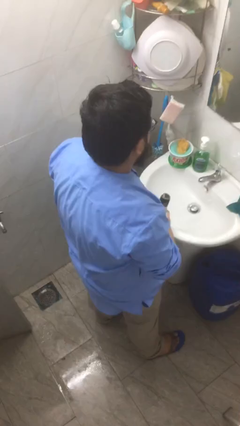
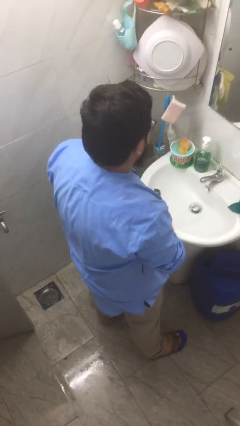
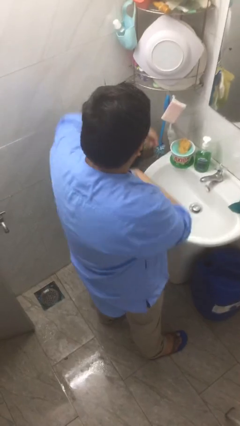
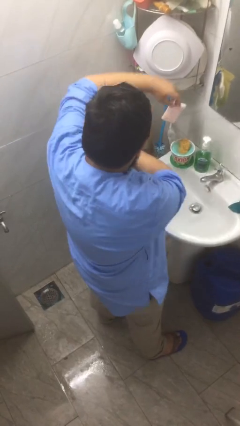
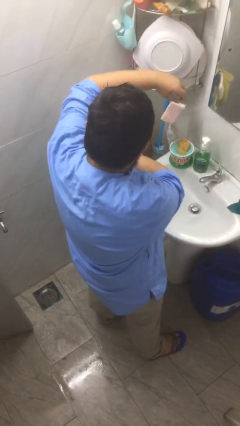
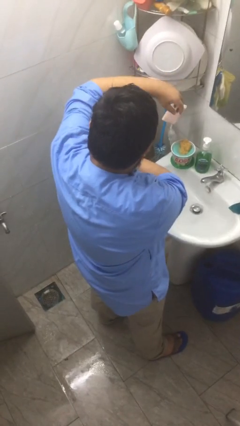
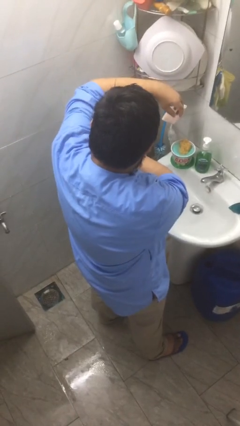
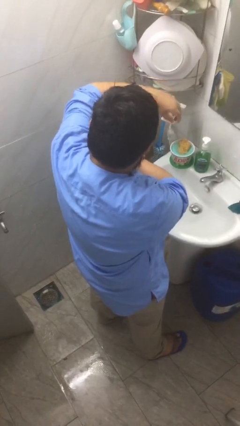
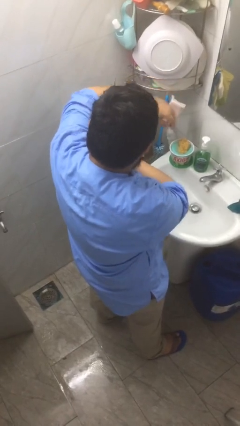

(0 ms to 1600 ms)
person applies deodorant

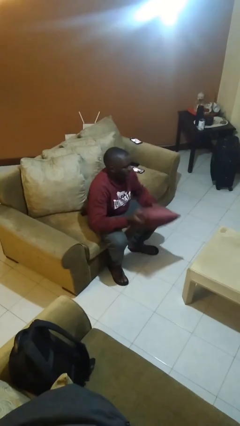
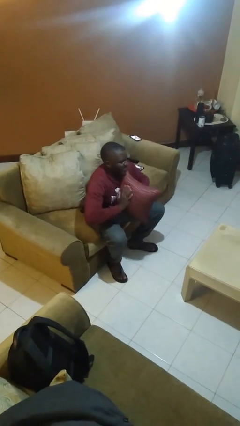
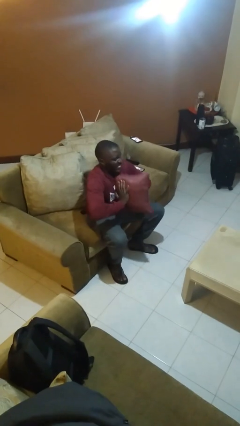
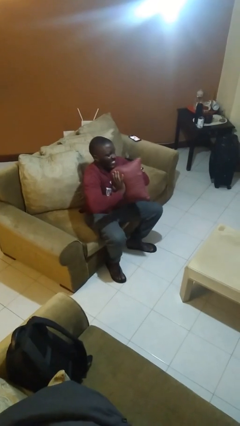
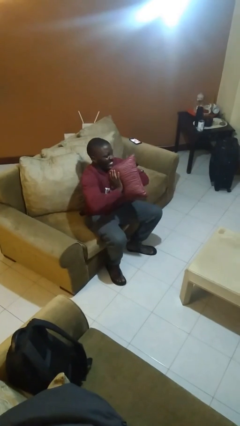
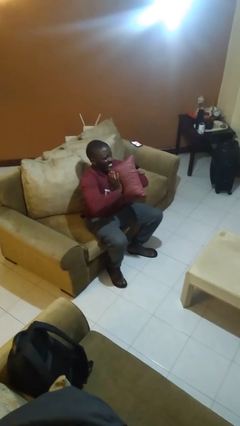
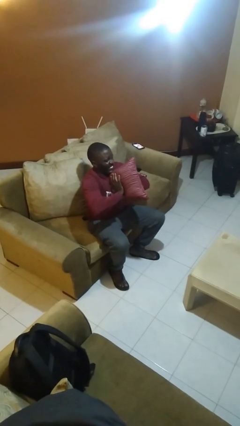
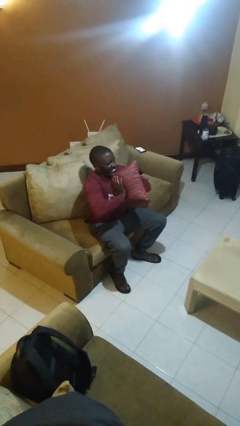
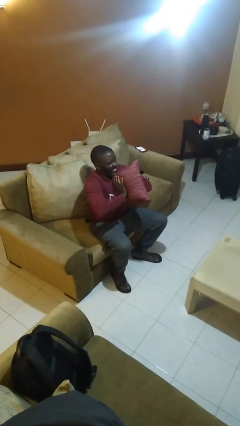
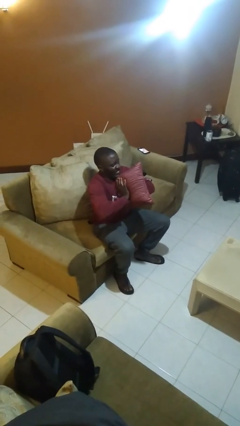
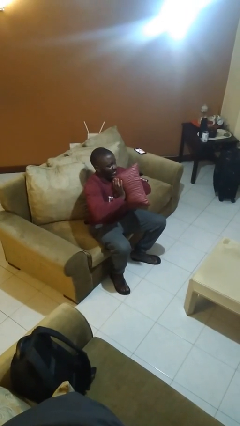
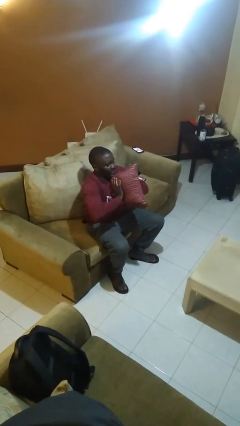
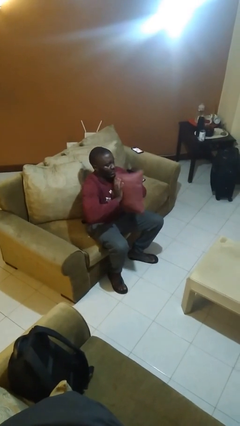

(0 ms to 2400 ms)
person squeezes object

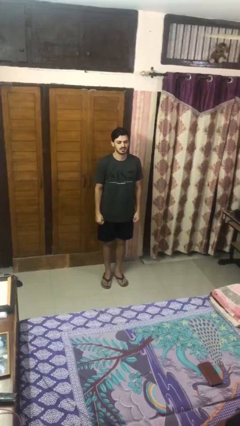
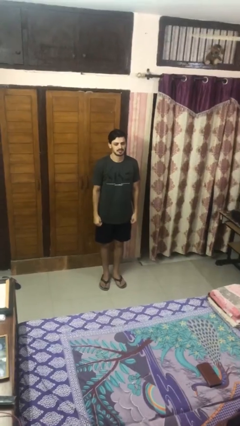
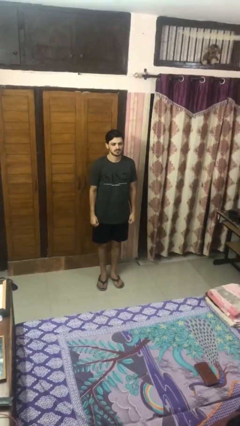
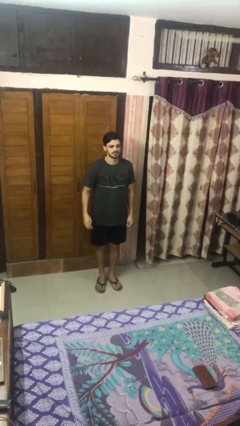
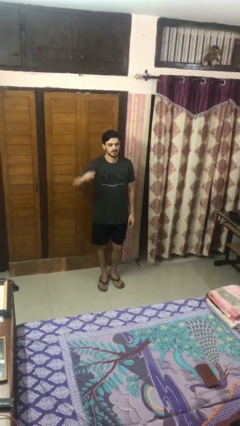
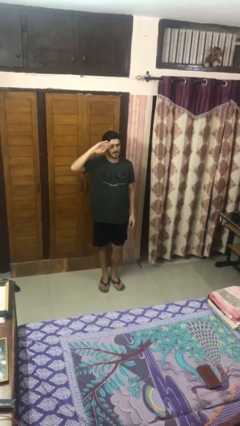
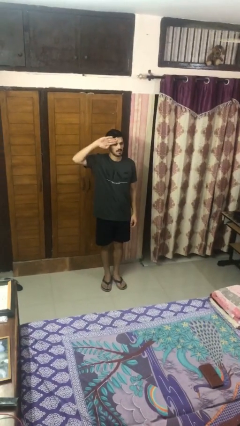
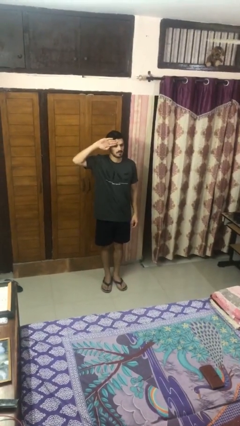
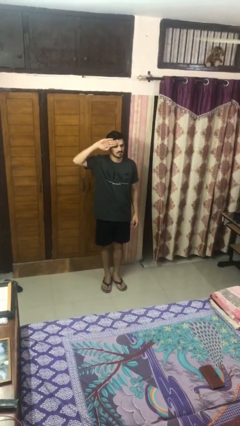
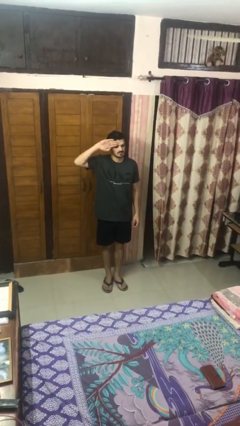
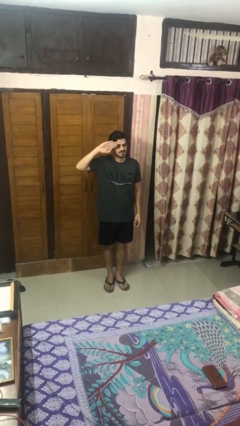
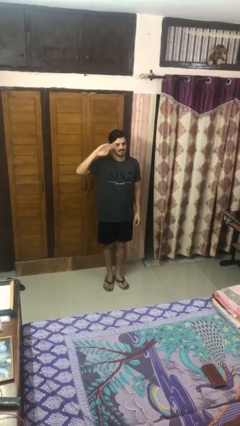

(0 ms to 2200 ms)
person salutes

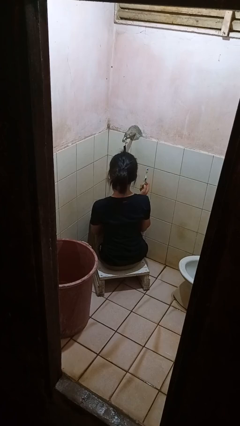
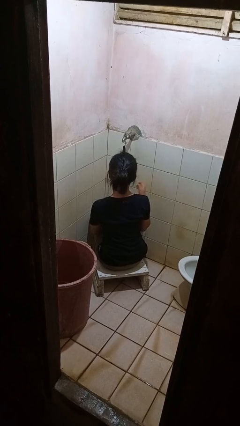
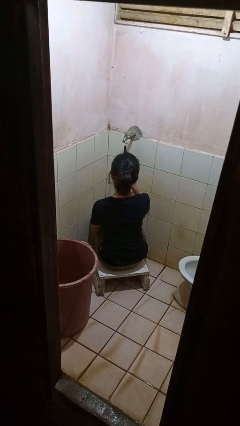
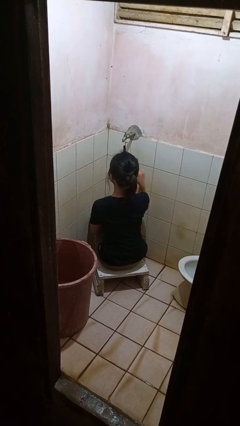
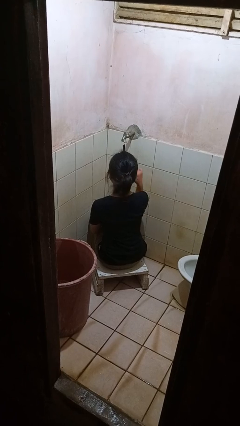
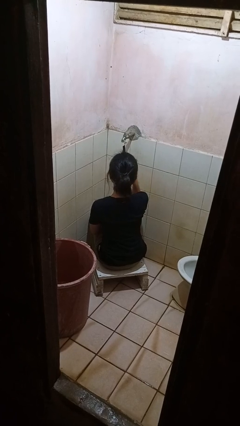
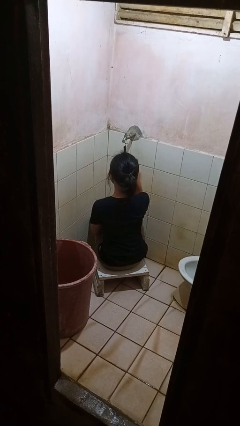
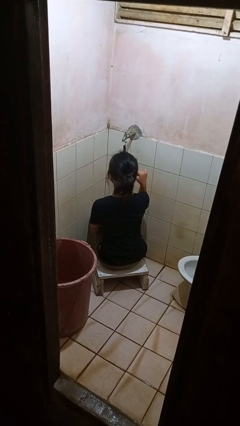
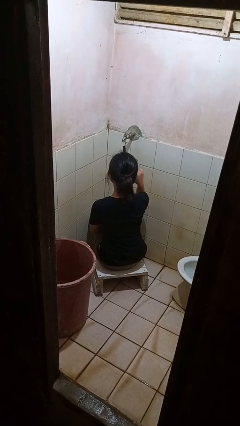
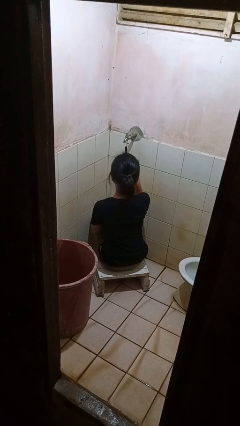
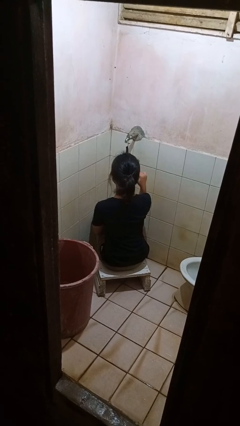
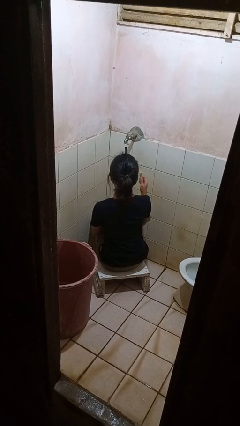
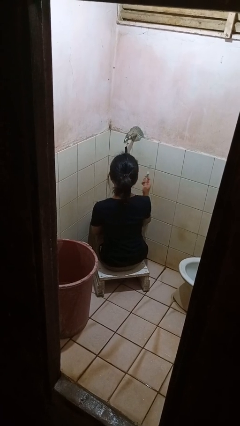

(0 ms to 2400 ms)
person brushes teeth

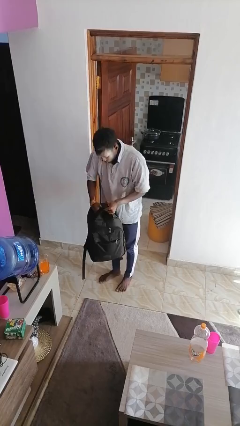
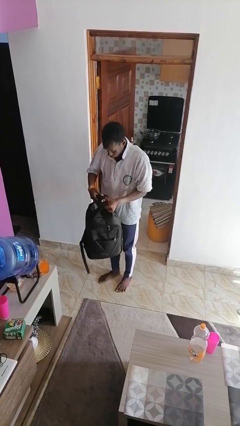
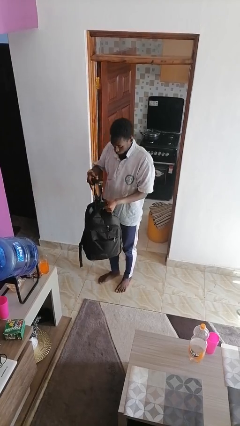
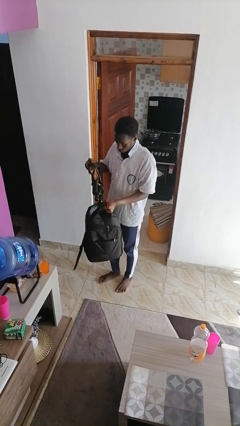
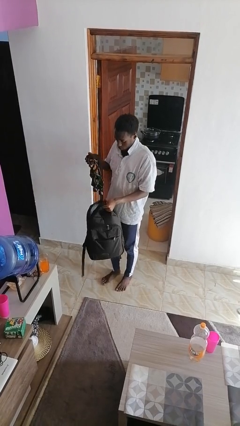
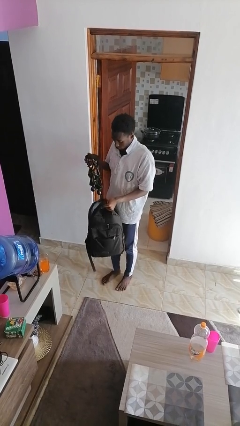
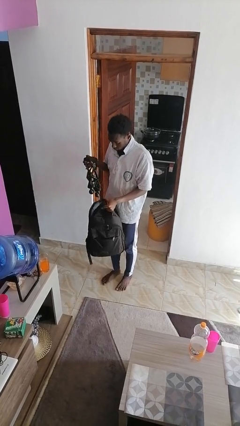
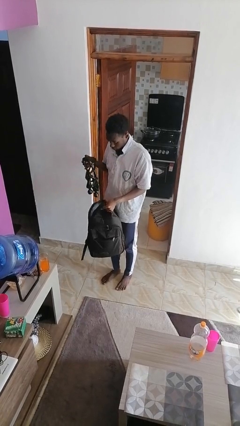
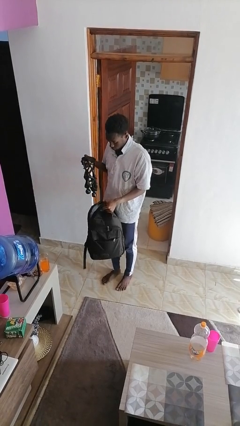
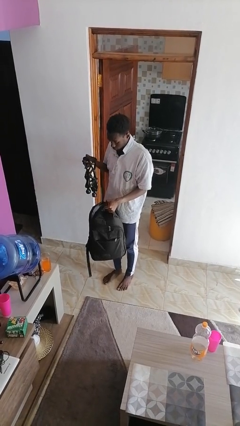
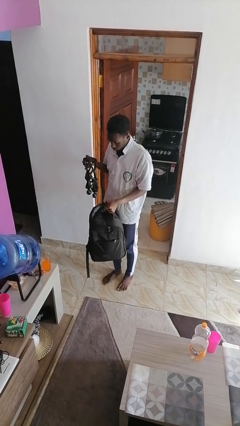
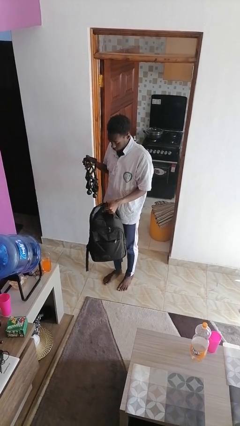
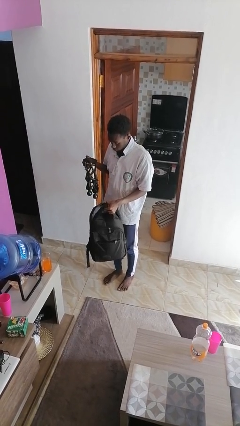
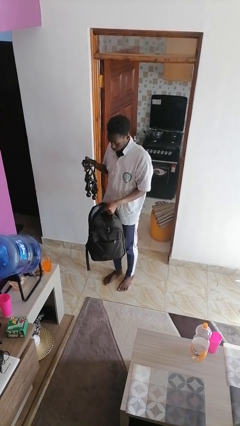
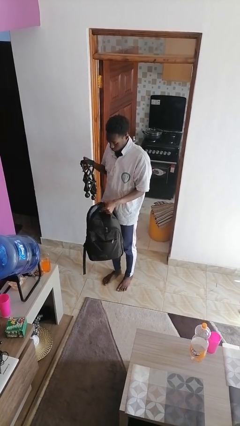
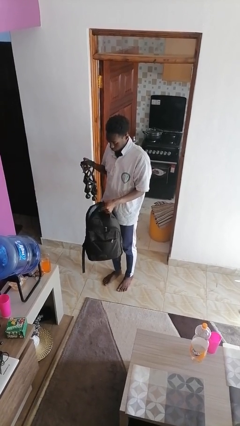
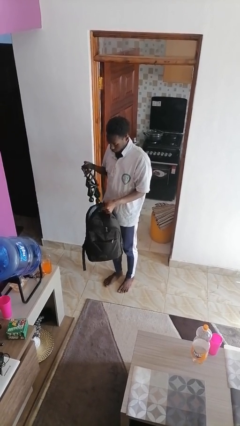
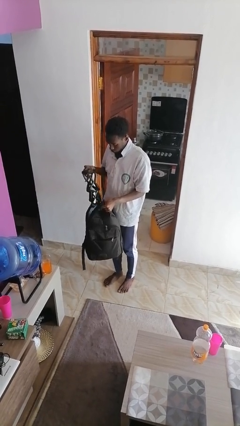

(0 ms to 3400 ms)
person takes object from backpack

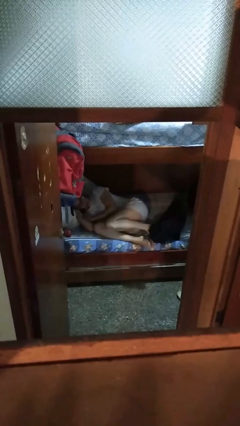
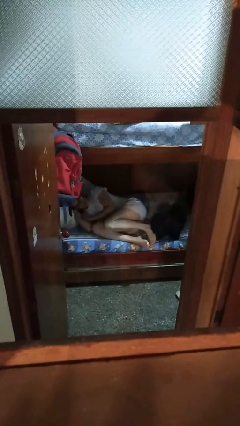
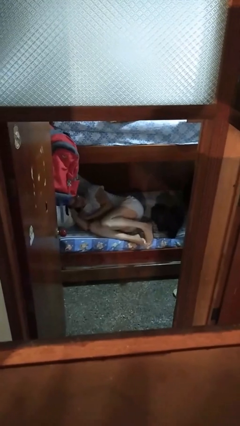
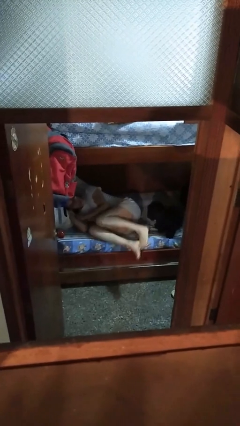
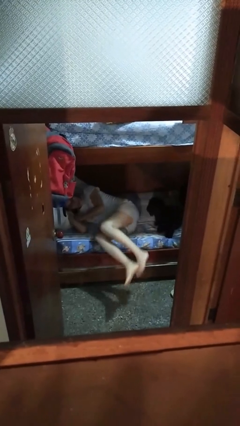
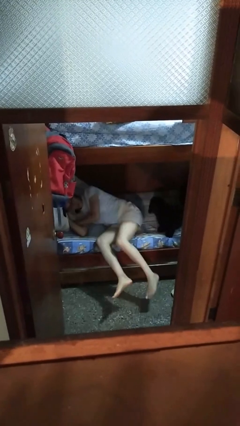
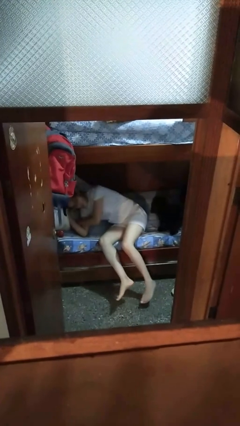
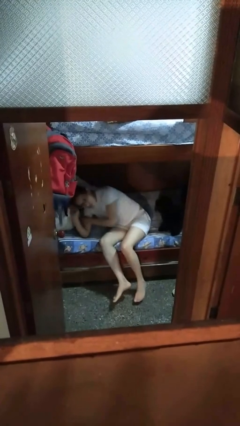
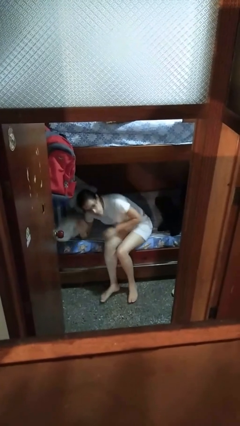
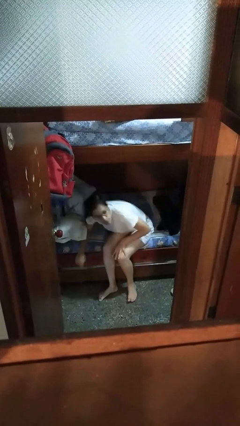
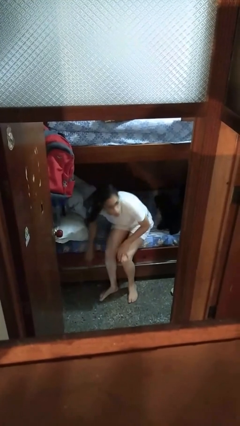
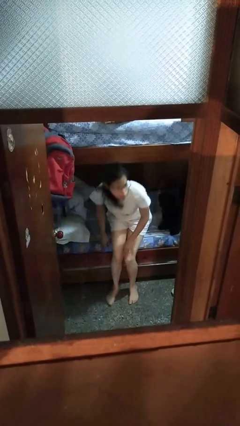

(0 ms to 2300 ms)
person stands up

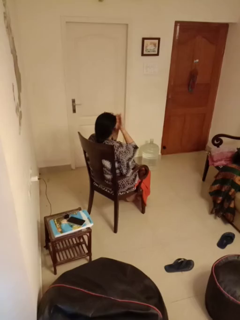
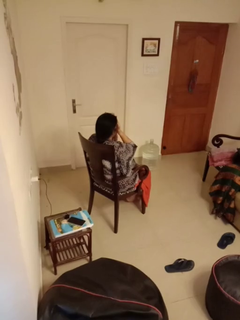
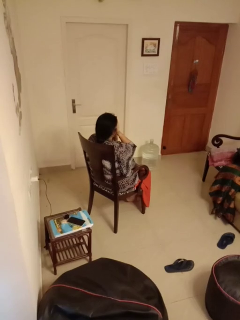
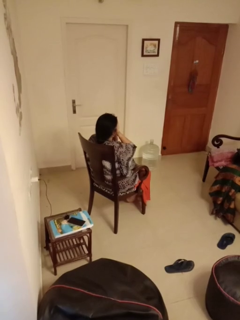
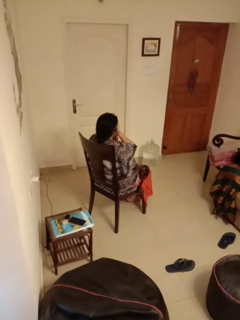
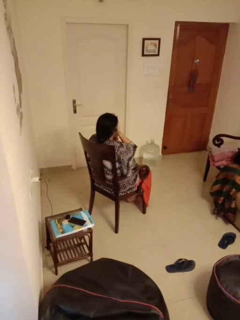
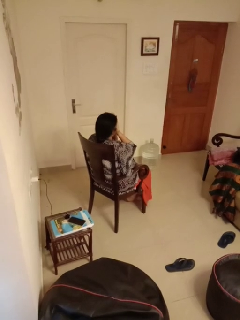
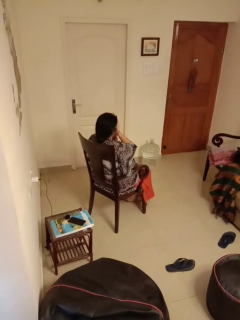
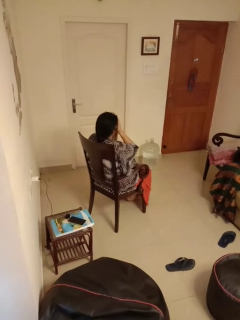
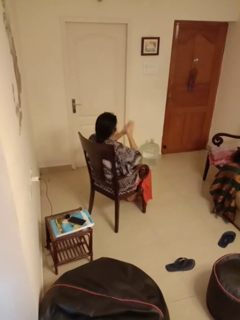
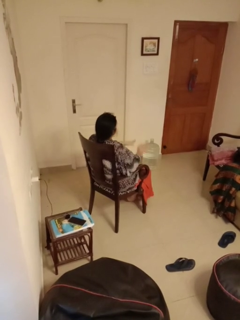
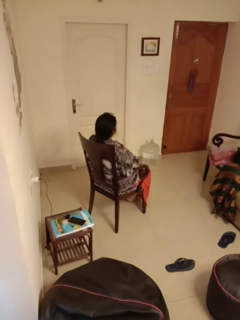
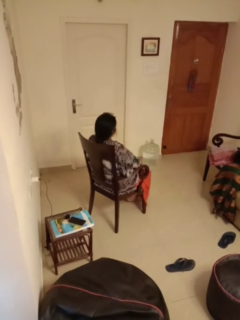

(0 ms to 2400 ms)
person covers face with hands

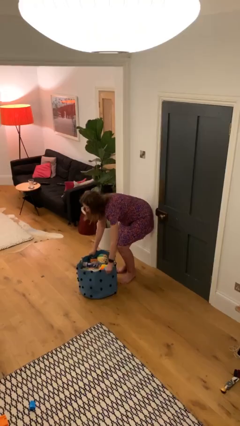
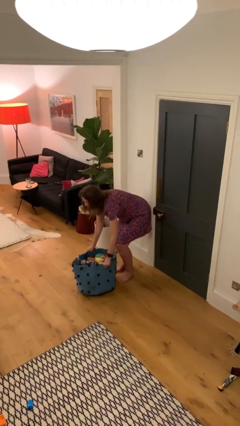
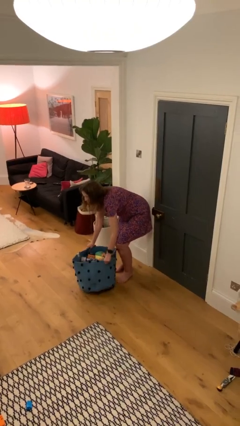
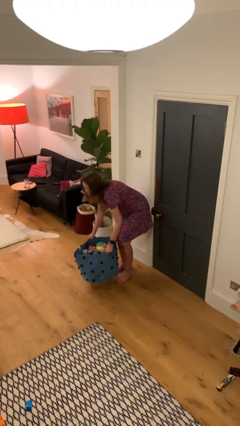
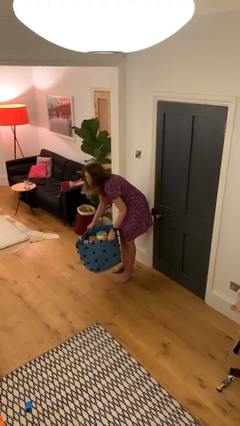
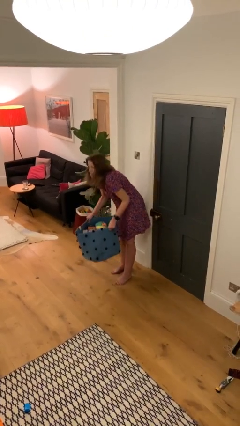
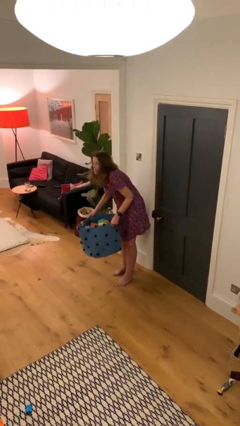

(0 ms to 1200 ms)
person picks up object from floor
